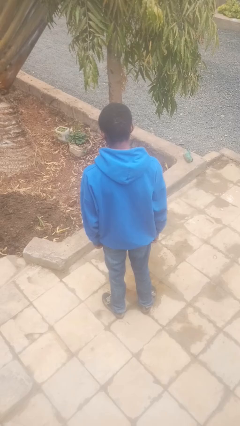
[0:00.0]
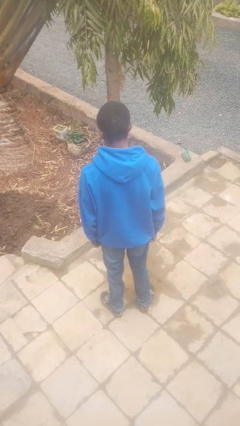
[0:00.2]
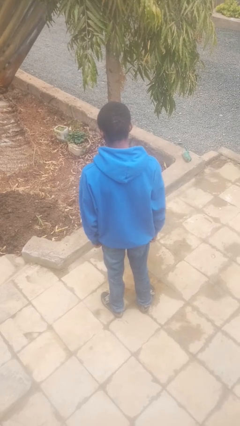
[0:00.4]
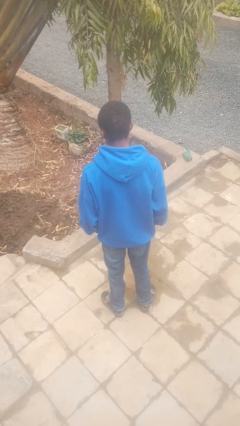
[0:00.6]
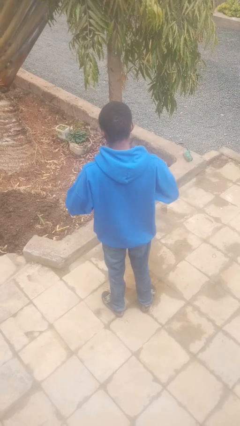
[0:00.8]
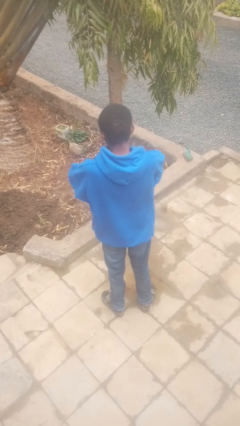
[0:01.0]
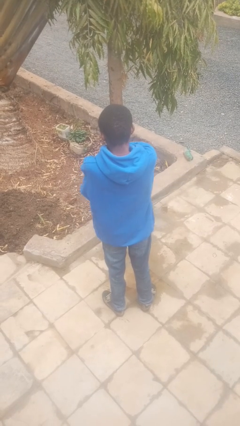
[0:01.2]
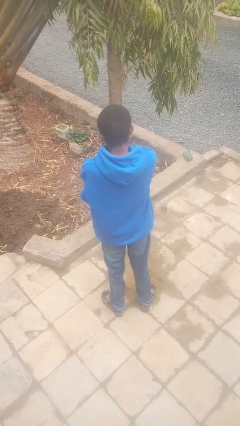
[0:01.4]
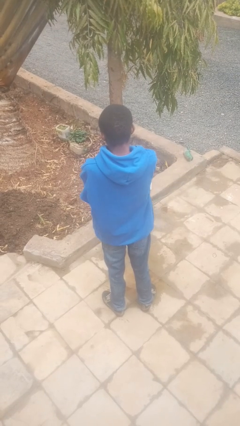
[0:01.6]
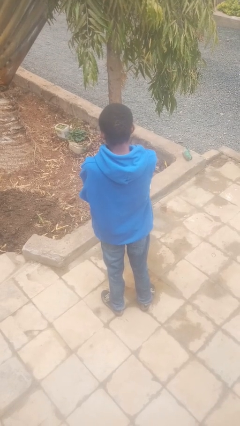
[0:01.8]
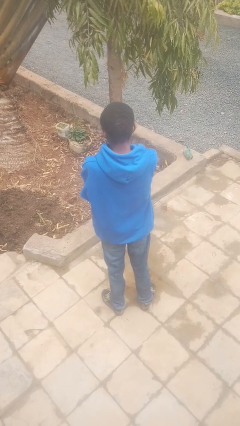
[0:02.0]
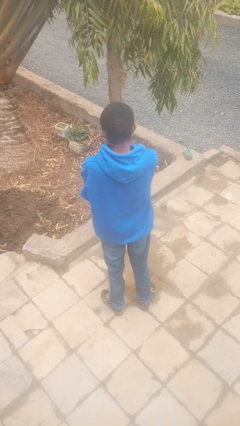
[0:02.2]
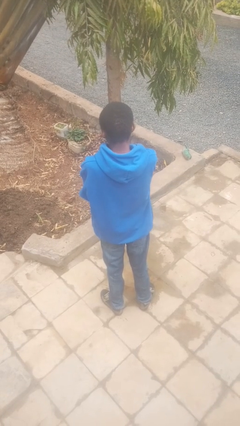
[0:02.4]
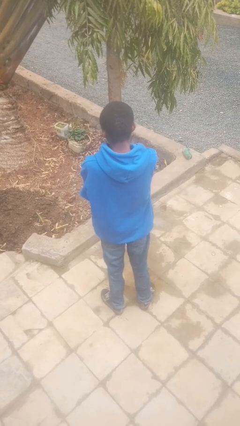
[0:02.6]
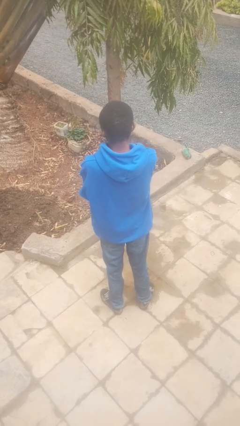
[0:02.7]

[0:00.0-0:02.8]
person crosses arms

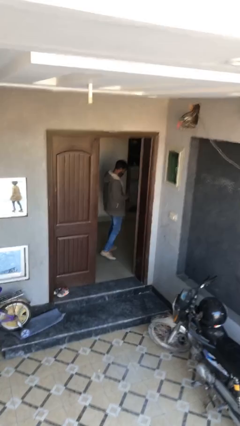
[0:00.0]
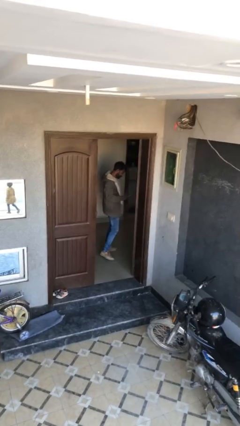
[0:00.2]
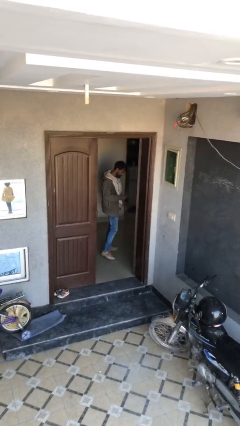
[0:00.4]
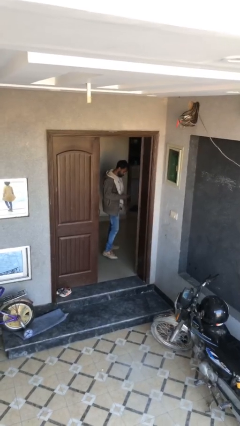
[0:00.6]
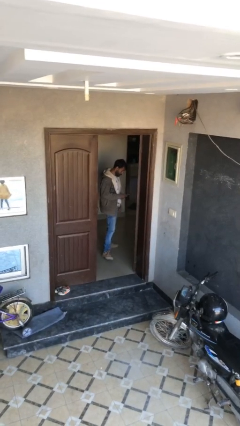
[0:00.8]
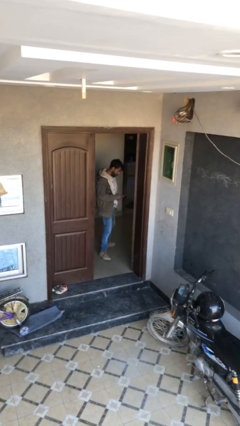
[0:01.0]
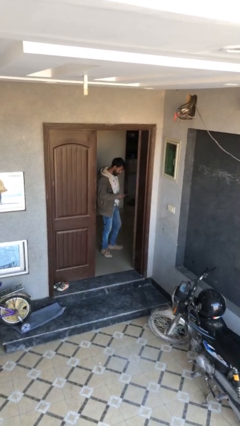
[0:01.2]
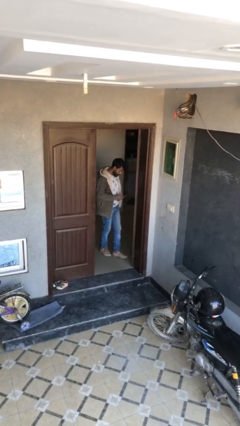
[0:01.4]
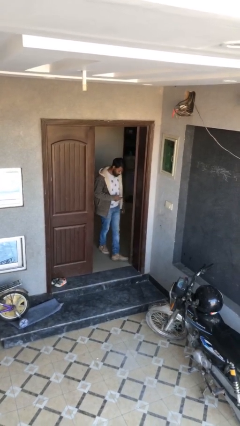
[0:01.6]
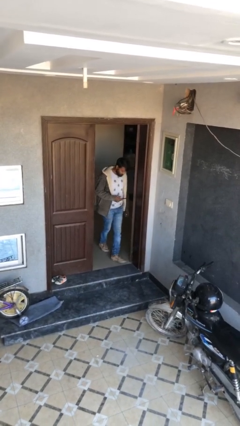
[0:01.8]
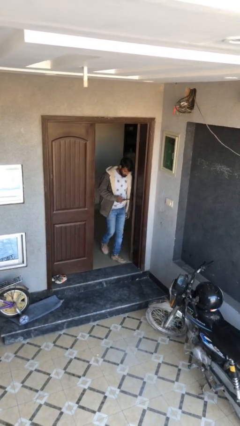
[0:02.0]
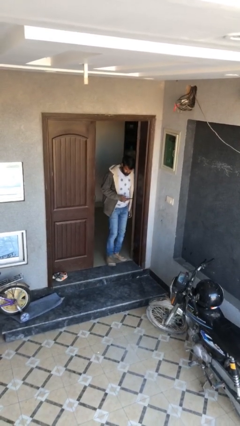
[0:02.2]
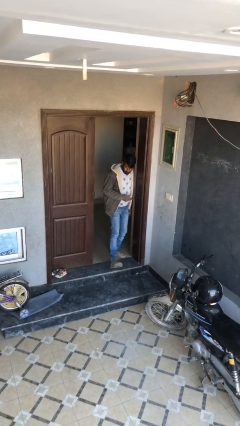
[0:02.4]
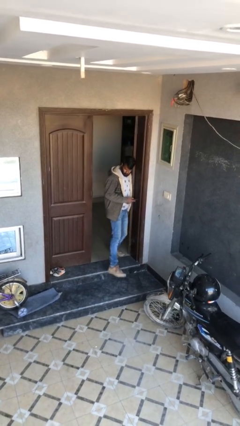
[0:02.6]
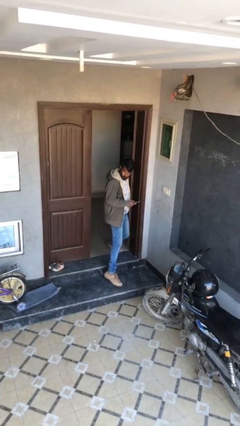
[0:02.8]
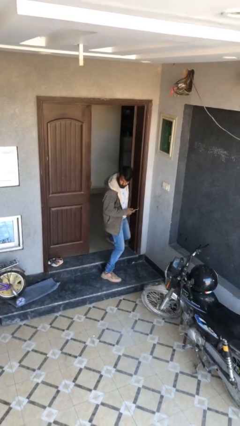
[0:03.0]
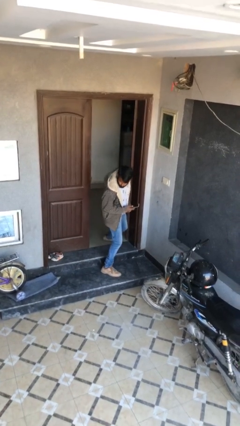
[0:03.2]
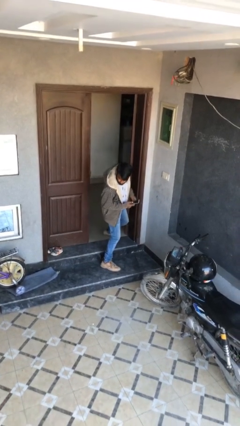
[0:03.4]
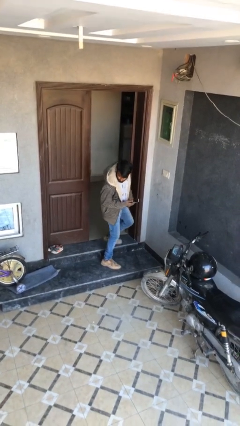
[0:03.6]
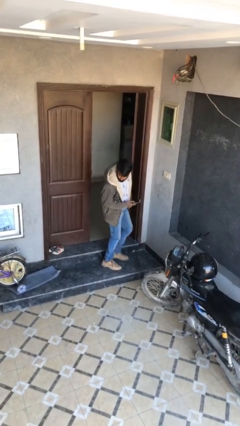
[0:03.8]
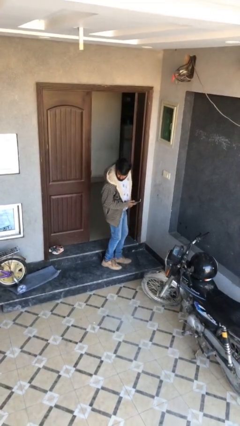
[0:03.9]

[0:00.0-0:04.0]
person enters scene through structure

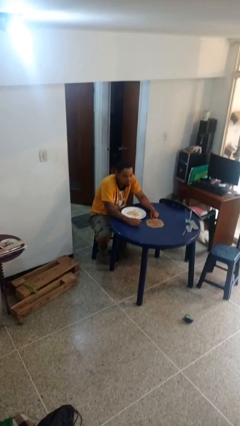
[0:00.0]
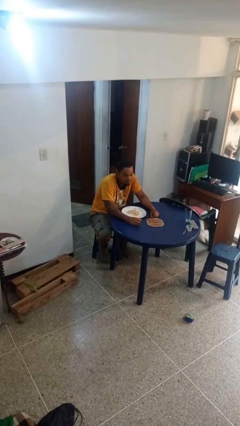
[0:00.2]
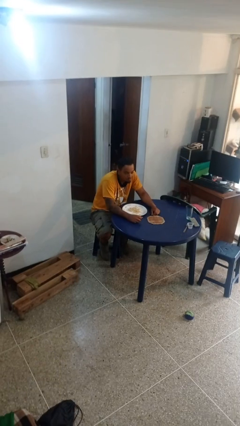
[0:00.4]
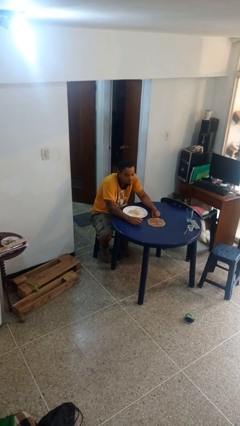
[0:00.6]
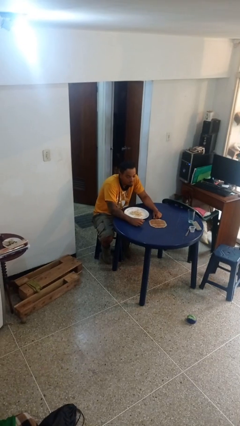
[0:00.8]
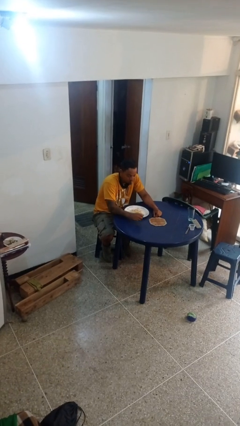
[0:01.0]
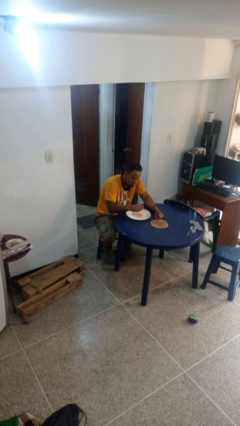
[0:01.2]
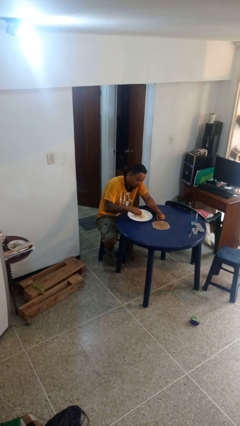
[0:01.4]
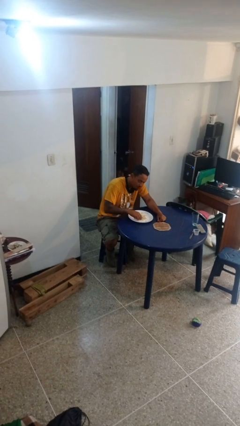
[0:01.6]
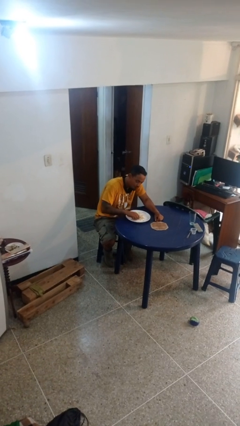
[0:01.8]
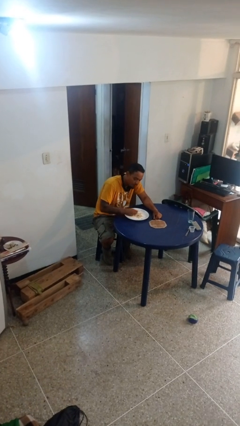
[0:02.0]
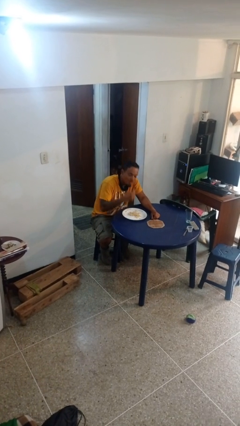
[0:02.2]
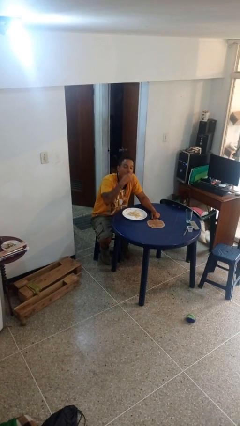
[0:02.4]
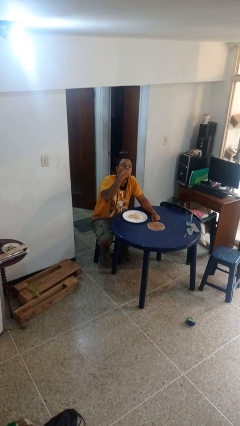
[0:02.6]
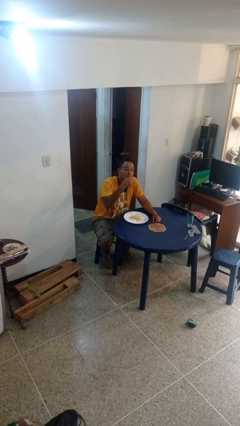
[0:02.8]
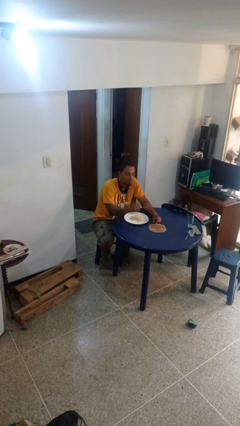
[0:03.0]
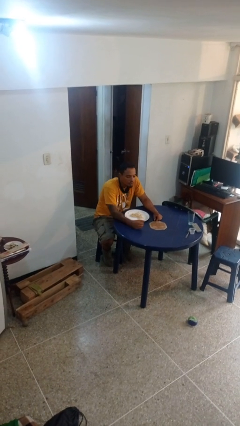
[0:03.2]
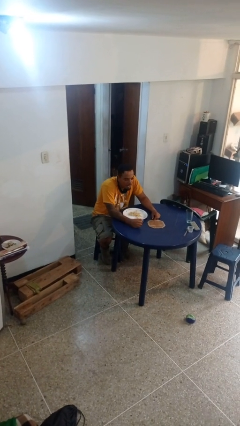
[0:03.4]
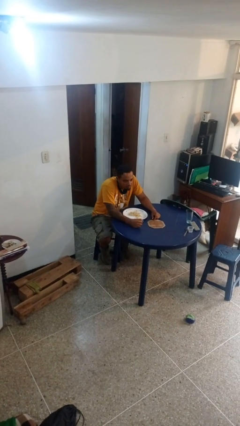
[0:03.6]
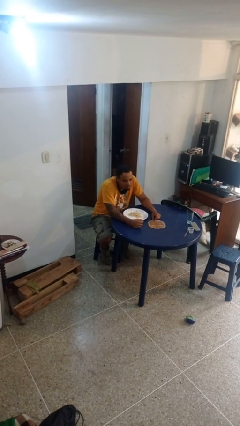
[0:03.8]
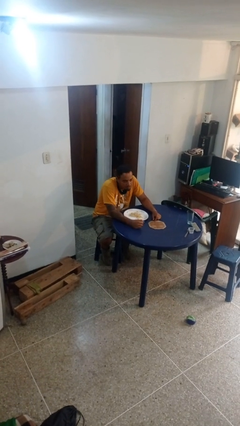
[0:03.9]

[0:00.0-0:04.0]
person eats with hands

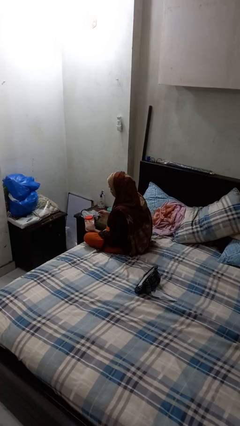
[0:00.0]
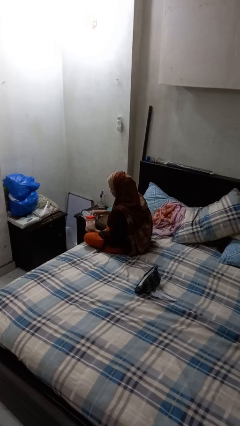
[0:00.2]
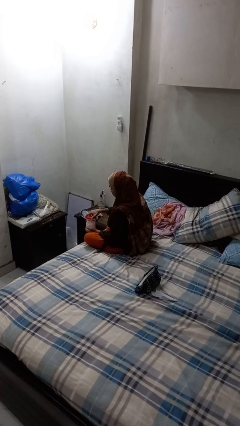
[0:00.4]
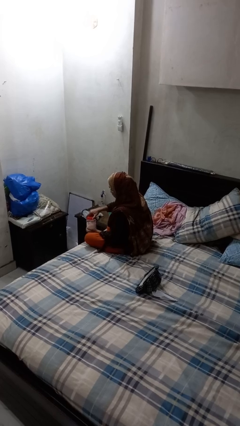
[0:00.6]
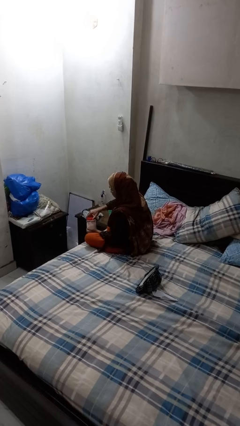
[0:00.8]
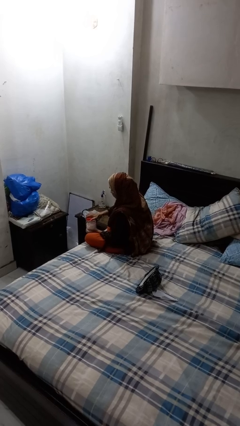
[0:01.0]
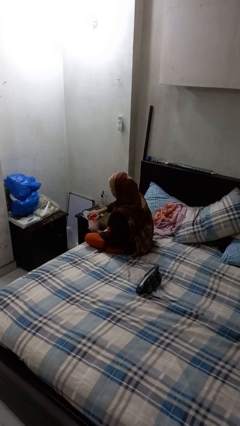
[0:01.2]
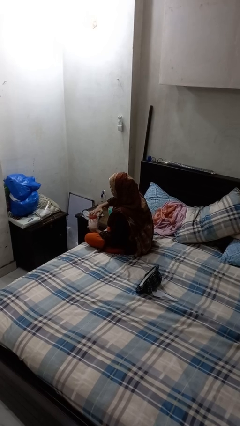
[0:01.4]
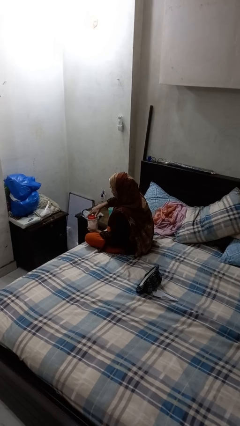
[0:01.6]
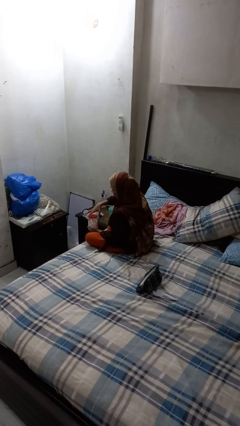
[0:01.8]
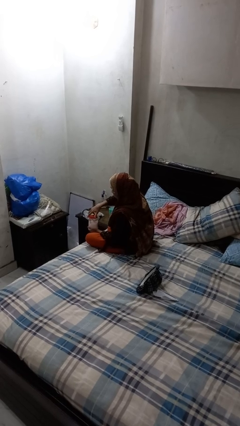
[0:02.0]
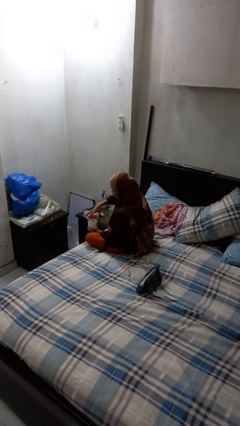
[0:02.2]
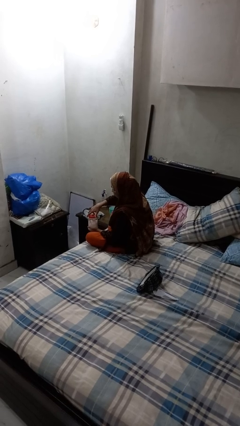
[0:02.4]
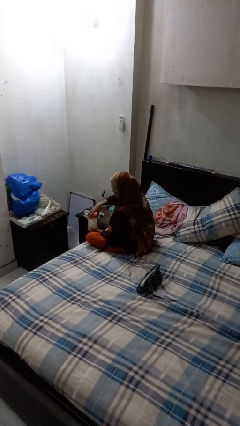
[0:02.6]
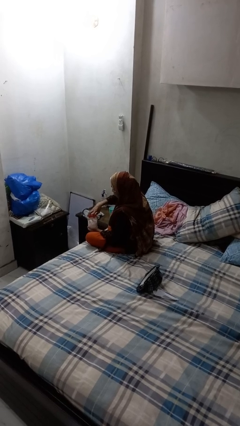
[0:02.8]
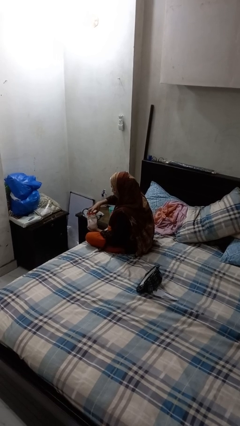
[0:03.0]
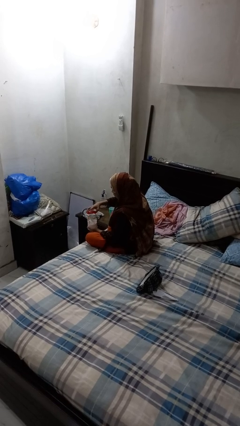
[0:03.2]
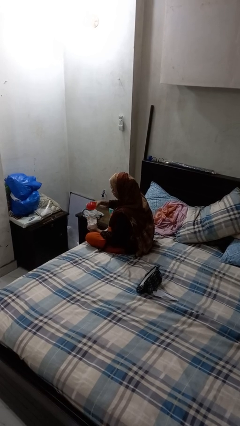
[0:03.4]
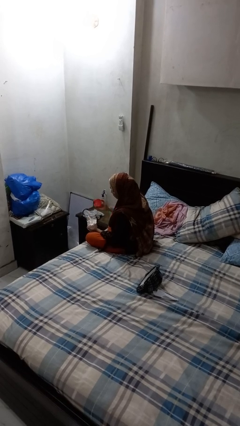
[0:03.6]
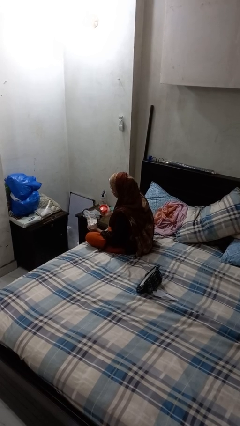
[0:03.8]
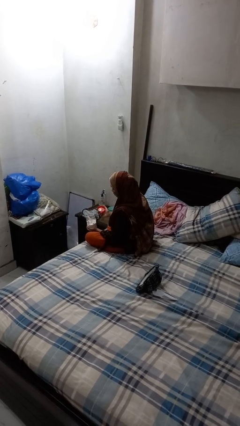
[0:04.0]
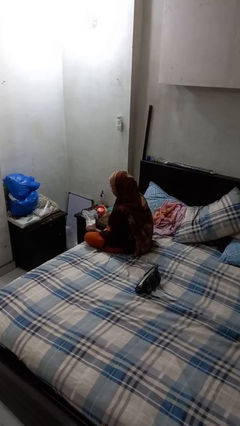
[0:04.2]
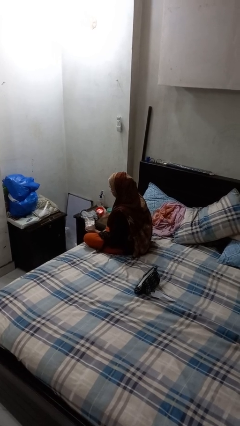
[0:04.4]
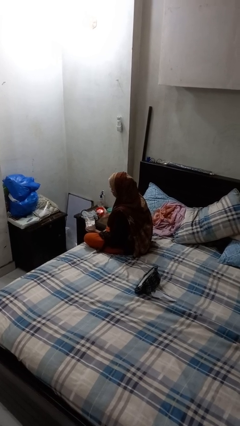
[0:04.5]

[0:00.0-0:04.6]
person opens jar

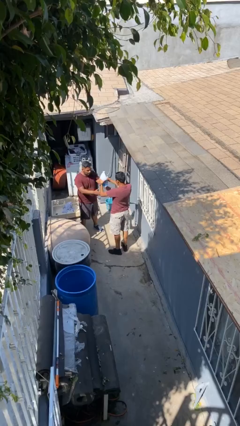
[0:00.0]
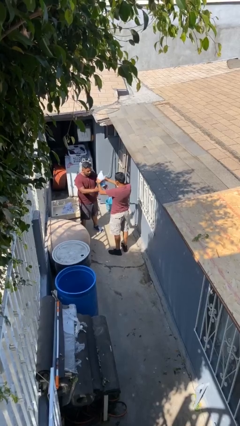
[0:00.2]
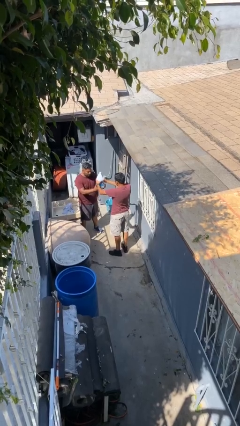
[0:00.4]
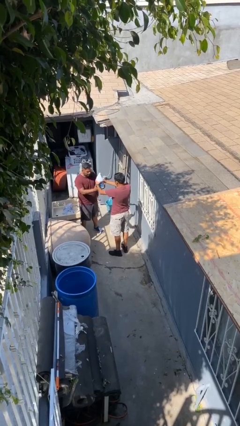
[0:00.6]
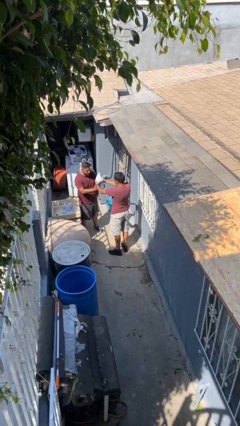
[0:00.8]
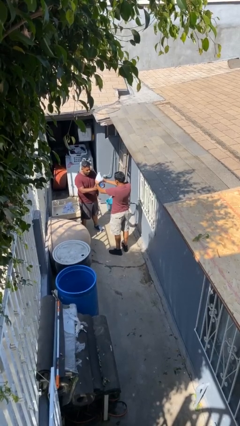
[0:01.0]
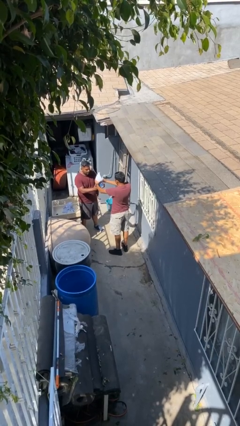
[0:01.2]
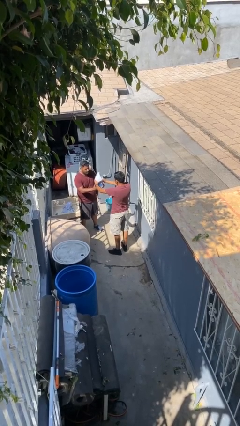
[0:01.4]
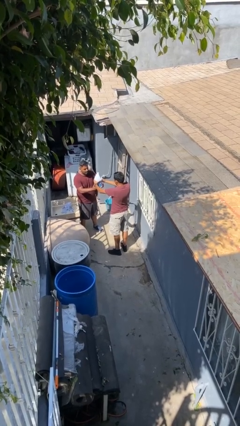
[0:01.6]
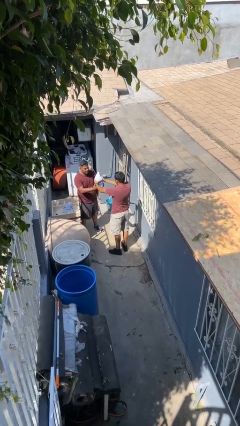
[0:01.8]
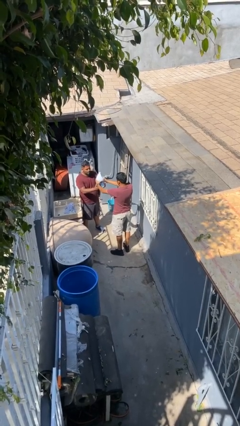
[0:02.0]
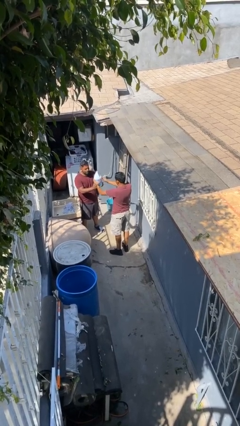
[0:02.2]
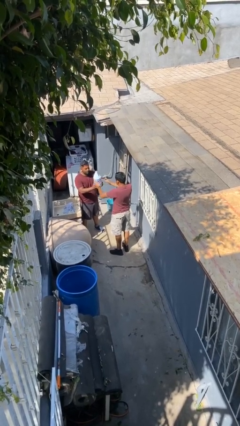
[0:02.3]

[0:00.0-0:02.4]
person transfers object to person
